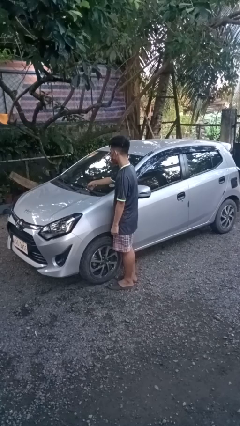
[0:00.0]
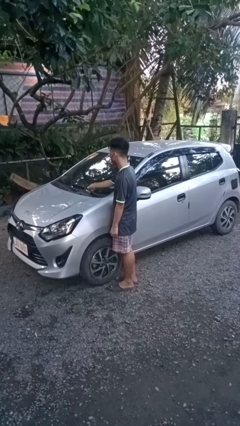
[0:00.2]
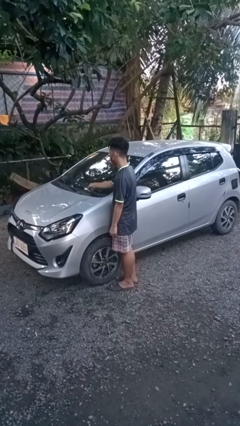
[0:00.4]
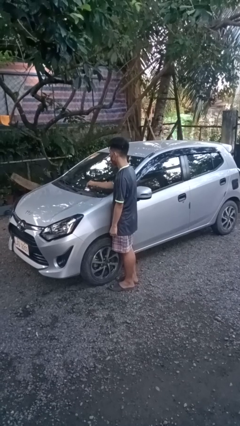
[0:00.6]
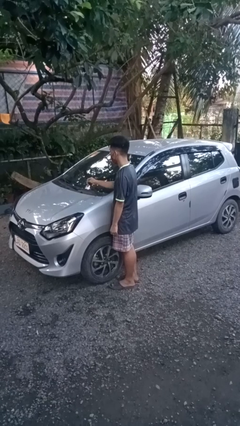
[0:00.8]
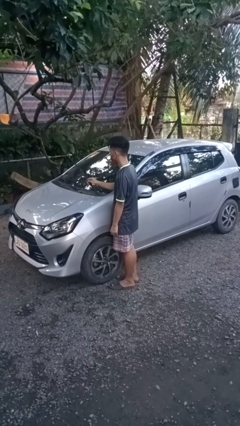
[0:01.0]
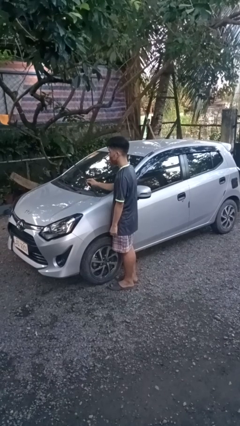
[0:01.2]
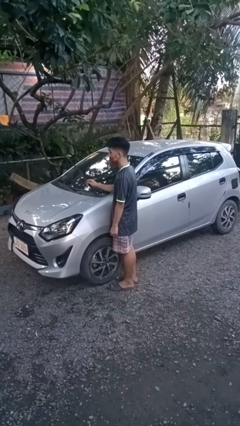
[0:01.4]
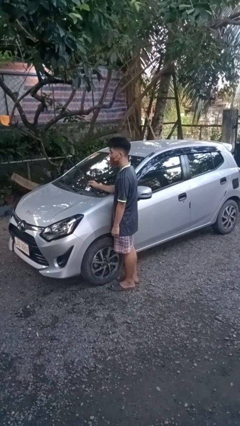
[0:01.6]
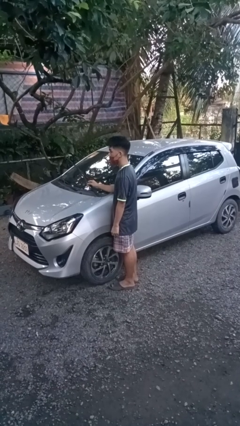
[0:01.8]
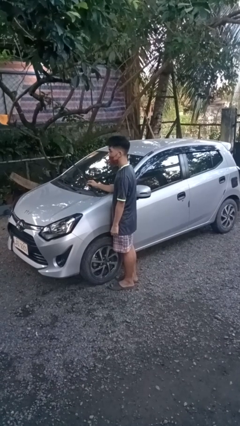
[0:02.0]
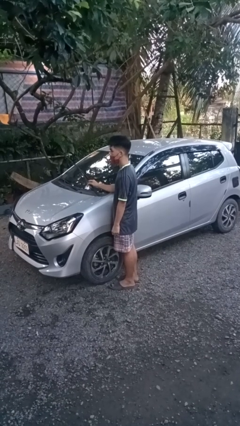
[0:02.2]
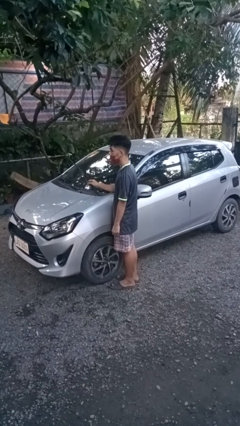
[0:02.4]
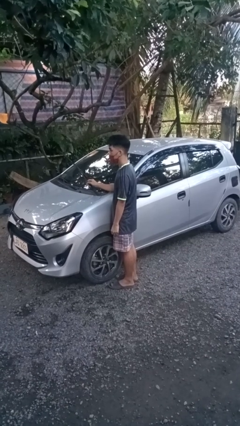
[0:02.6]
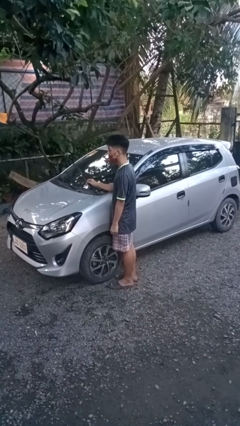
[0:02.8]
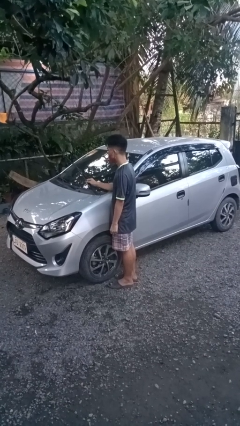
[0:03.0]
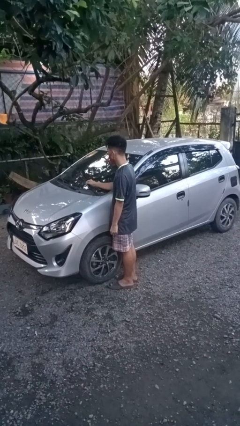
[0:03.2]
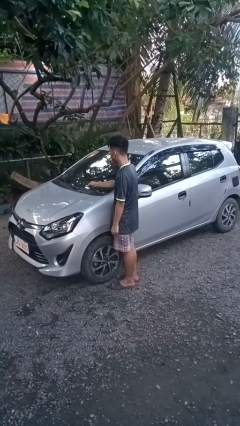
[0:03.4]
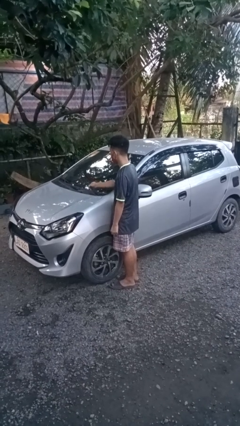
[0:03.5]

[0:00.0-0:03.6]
person flips up car wipers

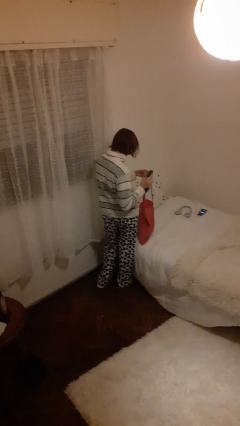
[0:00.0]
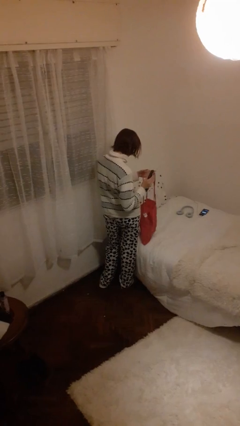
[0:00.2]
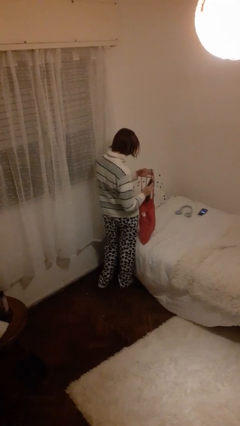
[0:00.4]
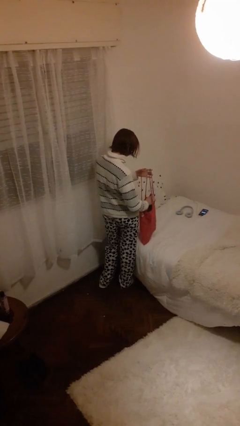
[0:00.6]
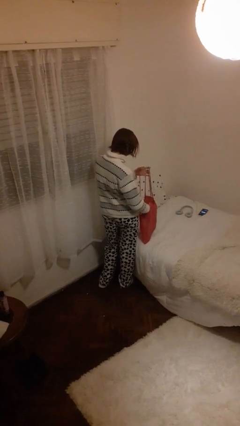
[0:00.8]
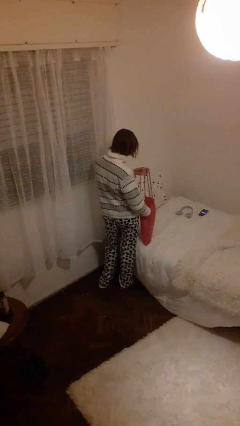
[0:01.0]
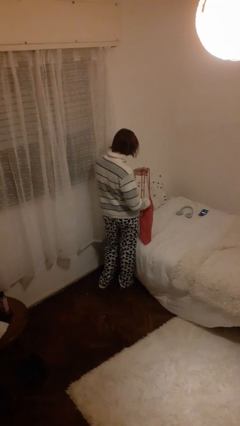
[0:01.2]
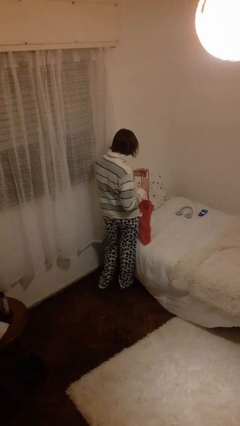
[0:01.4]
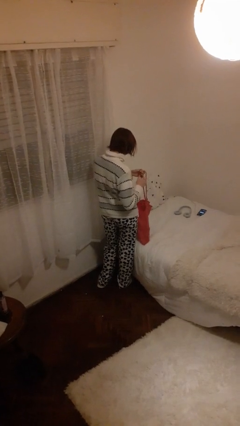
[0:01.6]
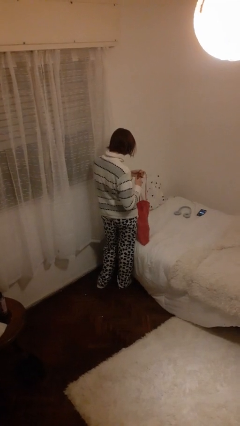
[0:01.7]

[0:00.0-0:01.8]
person puts object into bag

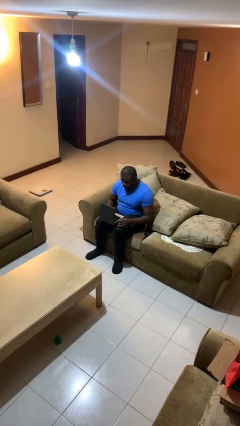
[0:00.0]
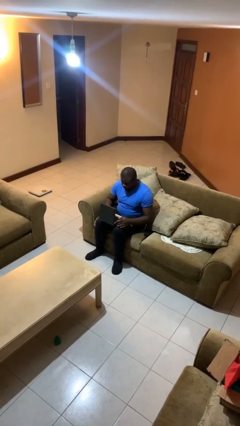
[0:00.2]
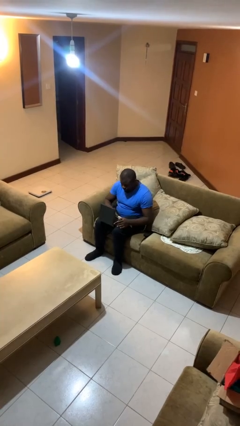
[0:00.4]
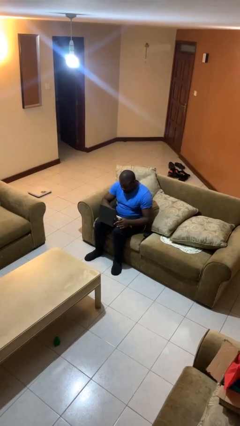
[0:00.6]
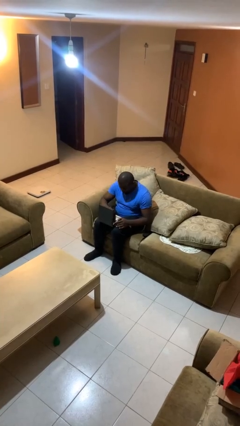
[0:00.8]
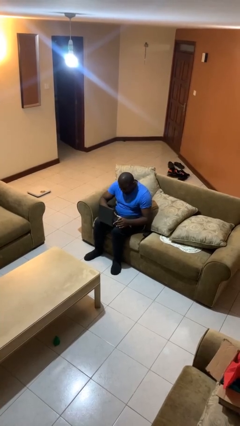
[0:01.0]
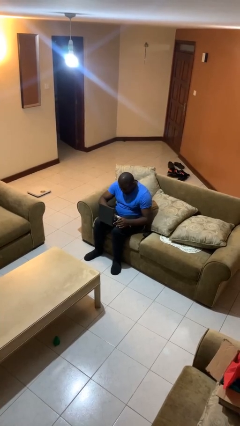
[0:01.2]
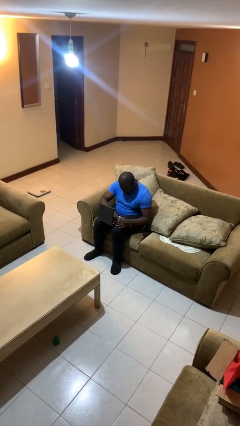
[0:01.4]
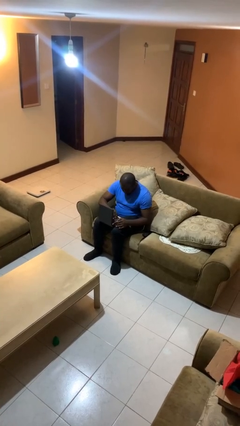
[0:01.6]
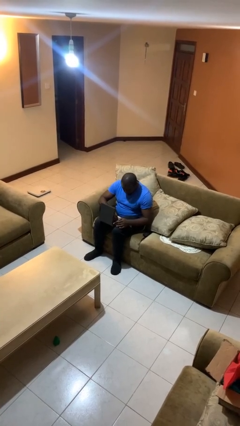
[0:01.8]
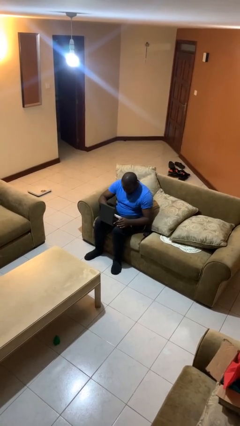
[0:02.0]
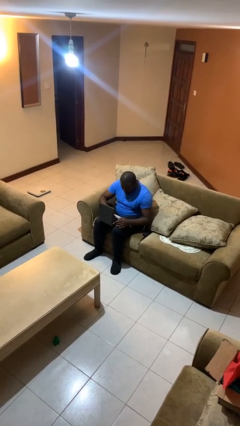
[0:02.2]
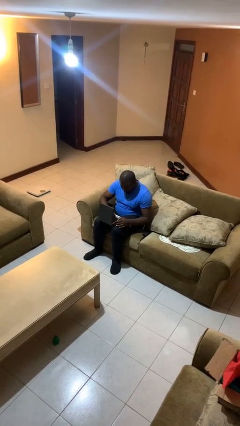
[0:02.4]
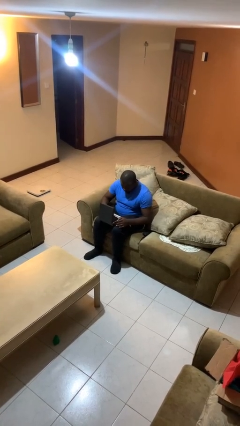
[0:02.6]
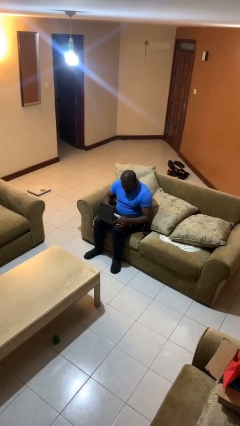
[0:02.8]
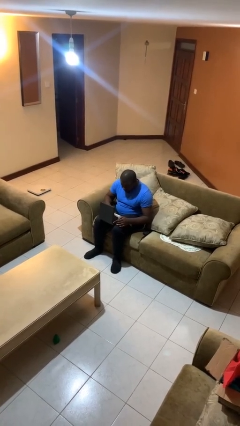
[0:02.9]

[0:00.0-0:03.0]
person searches jewelry box

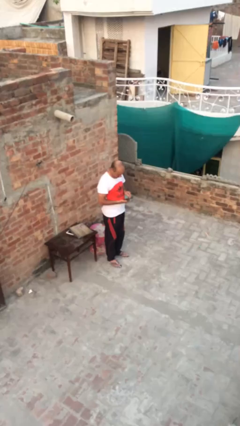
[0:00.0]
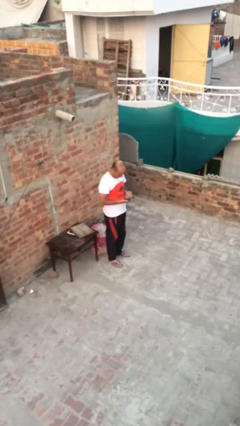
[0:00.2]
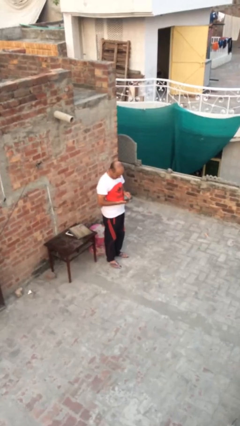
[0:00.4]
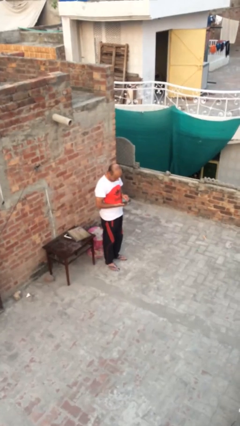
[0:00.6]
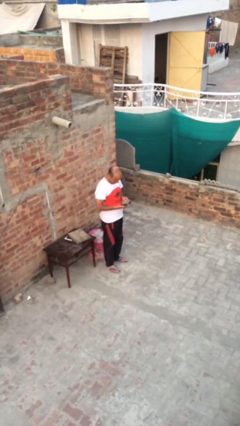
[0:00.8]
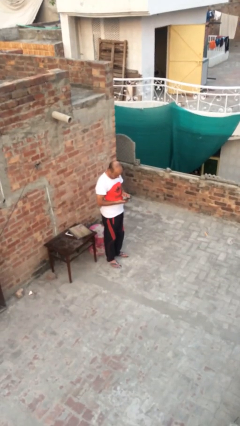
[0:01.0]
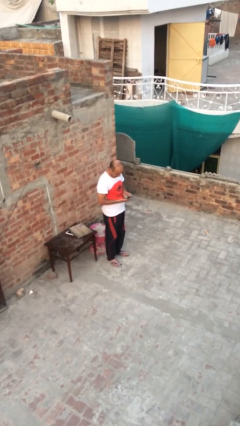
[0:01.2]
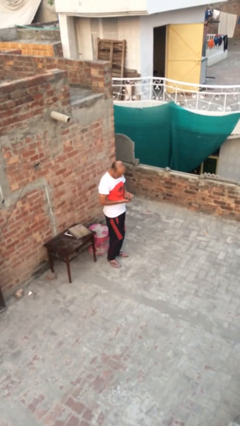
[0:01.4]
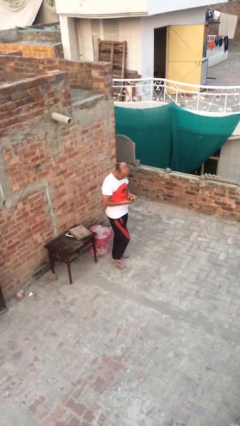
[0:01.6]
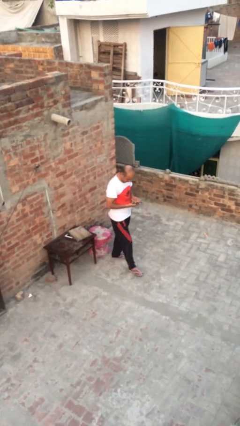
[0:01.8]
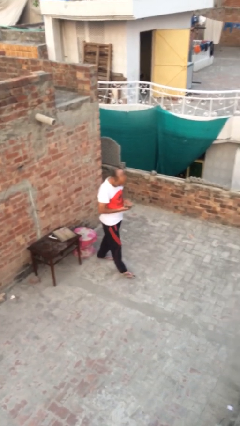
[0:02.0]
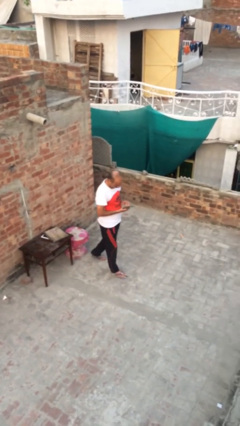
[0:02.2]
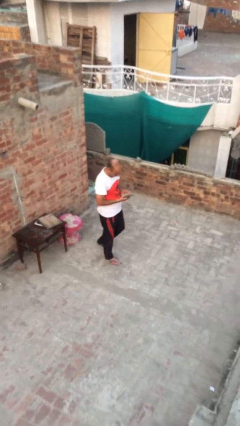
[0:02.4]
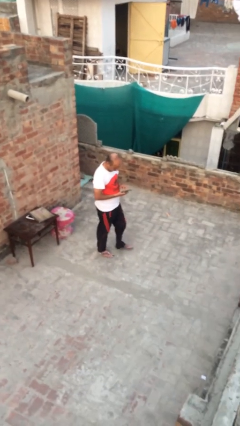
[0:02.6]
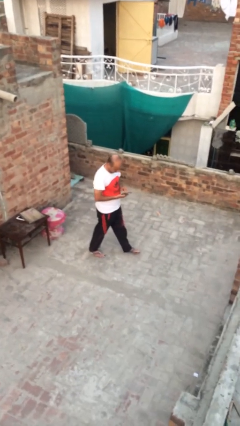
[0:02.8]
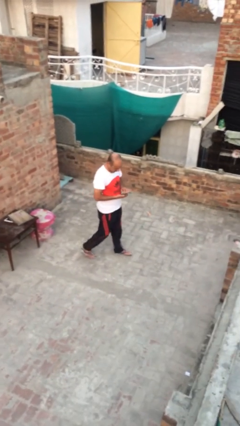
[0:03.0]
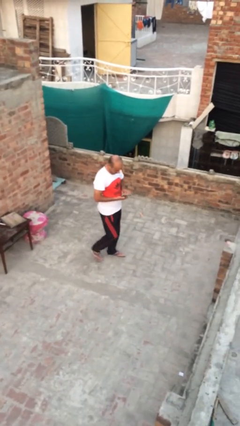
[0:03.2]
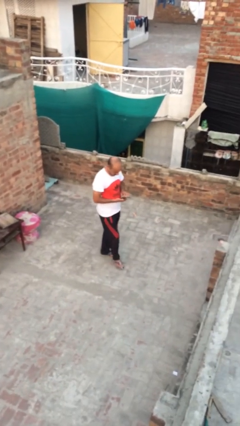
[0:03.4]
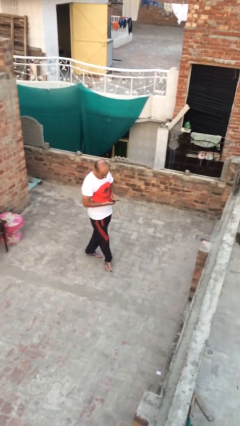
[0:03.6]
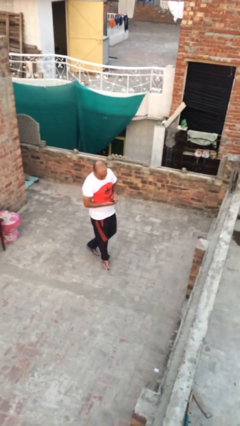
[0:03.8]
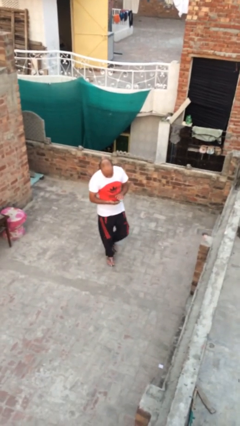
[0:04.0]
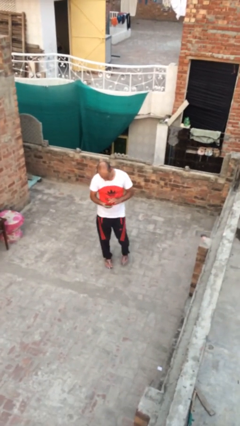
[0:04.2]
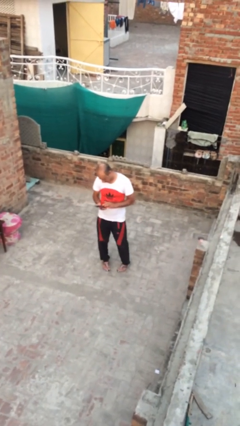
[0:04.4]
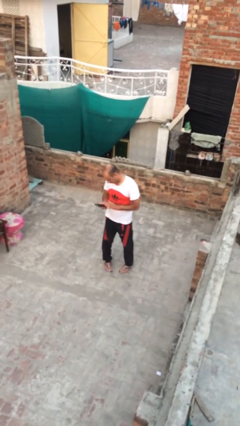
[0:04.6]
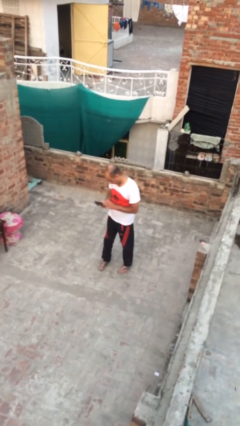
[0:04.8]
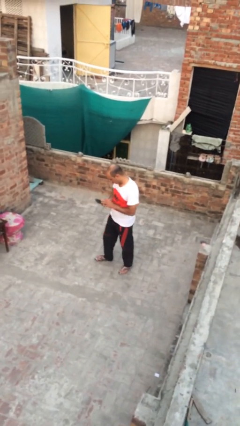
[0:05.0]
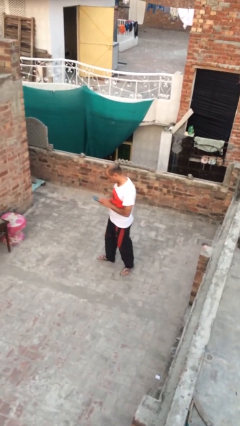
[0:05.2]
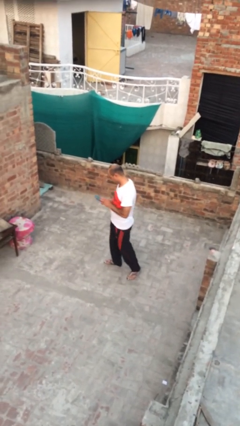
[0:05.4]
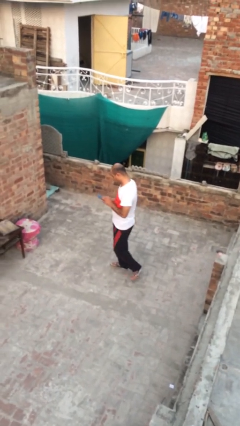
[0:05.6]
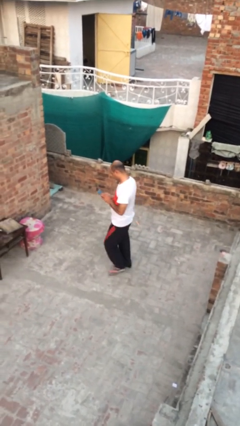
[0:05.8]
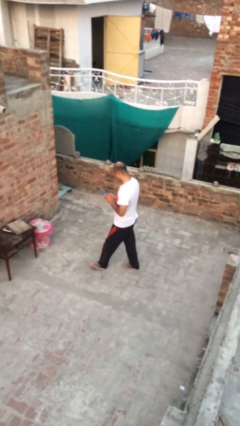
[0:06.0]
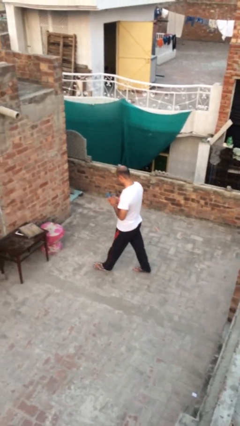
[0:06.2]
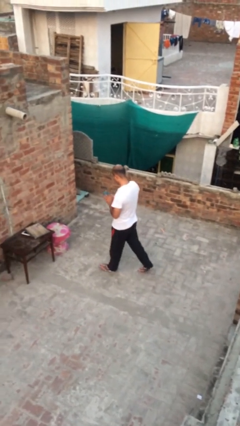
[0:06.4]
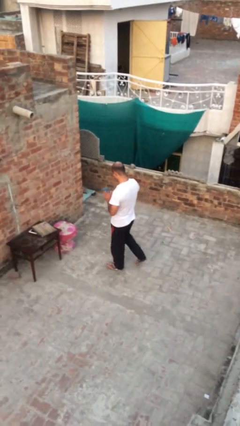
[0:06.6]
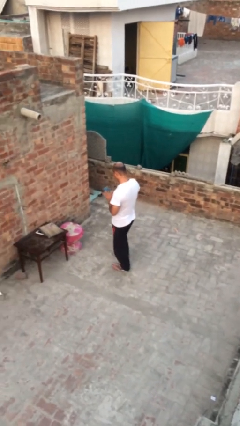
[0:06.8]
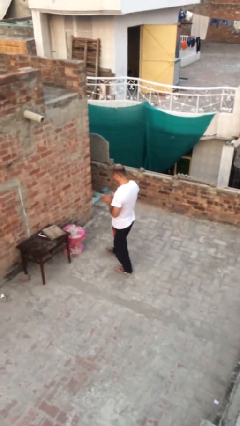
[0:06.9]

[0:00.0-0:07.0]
person texts on phone

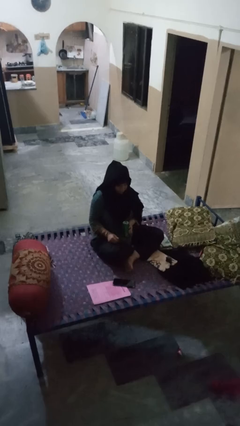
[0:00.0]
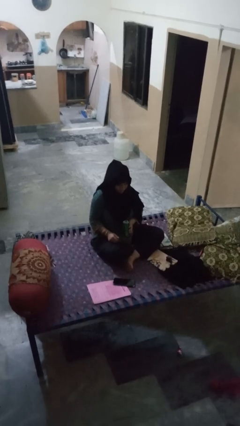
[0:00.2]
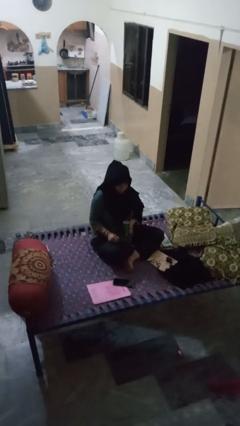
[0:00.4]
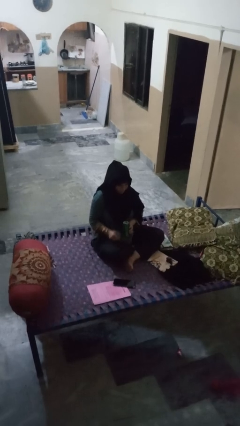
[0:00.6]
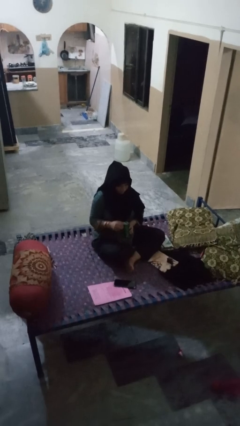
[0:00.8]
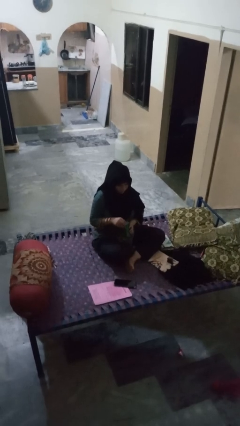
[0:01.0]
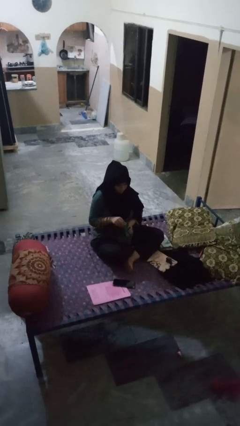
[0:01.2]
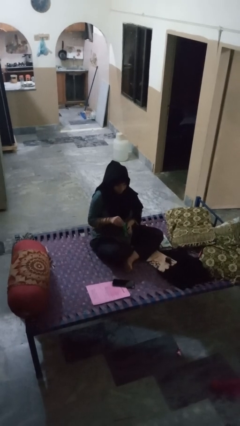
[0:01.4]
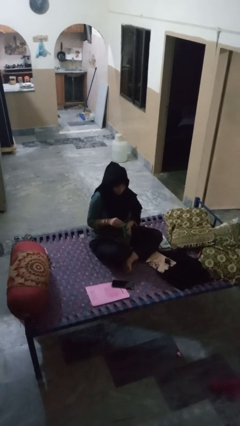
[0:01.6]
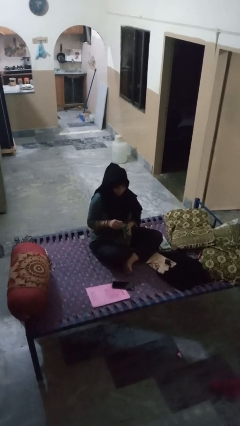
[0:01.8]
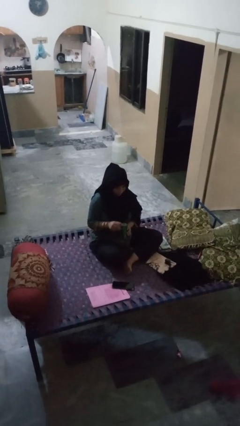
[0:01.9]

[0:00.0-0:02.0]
person opens can with can opener
